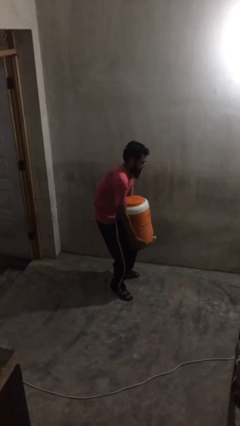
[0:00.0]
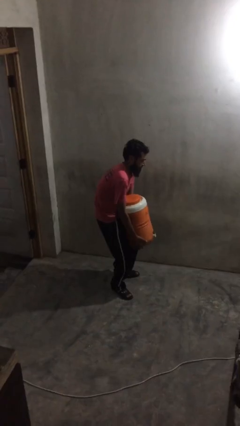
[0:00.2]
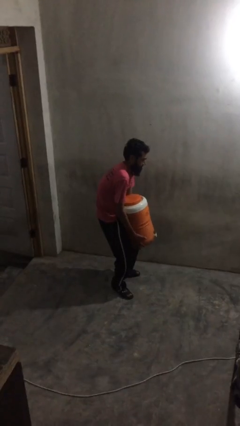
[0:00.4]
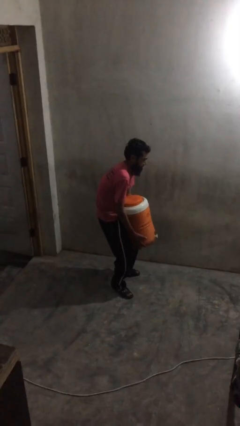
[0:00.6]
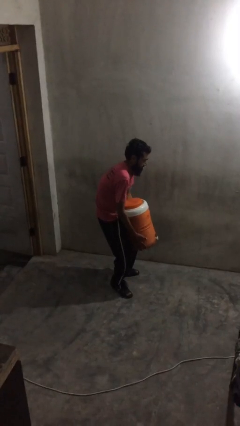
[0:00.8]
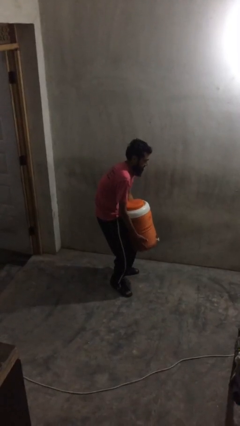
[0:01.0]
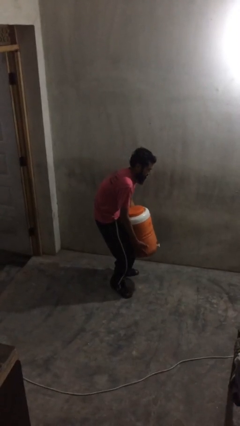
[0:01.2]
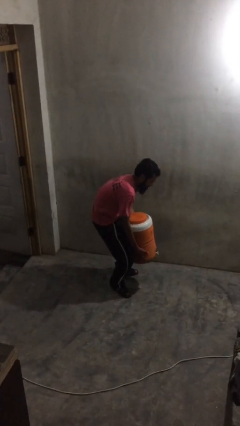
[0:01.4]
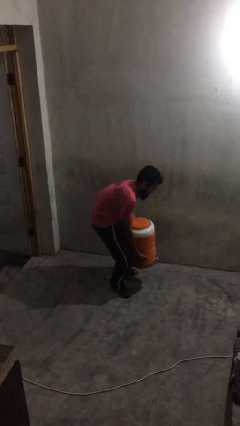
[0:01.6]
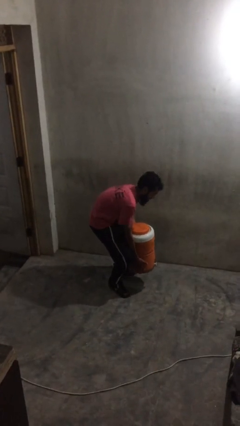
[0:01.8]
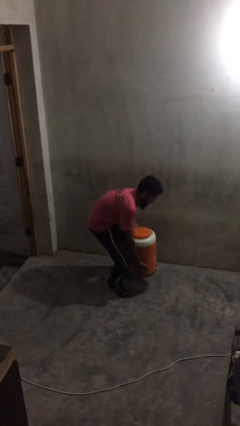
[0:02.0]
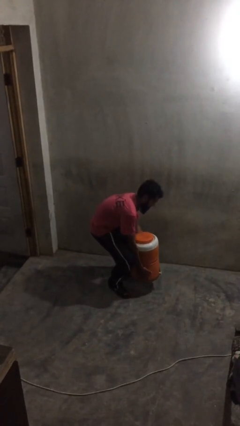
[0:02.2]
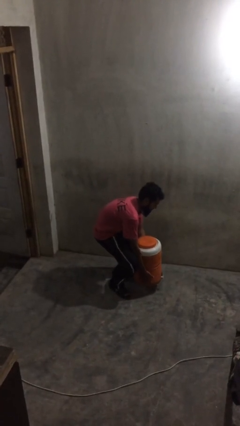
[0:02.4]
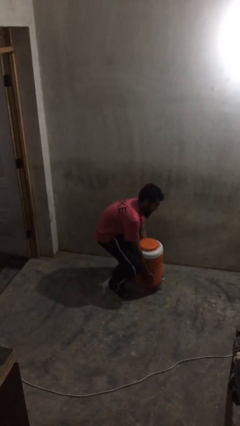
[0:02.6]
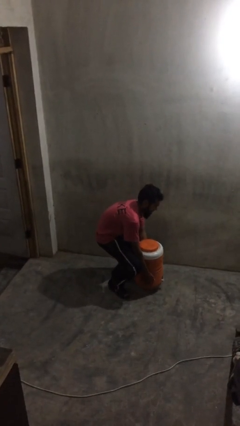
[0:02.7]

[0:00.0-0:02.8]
person puts down object on floor

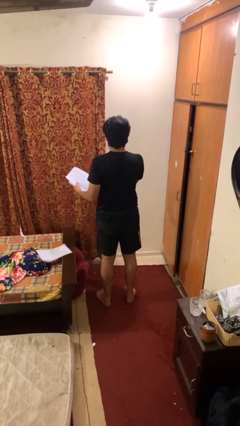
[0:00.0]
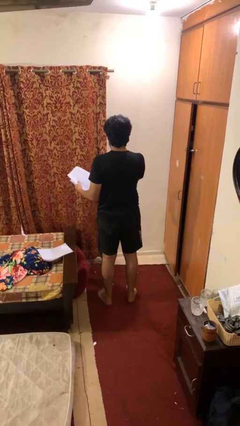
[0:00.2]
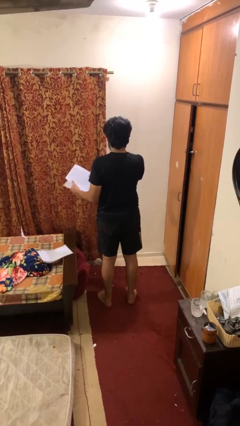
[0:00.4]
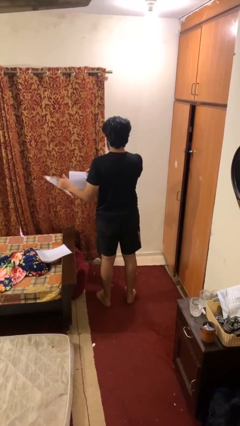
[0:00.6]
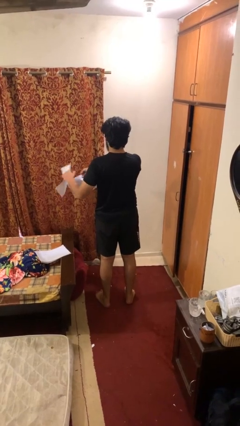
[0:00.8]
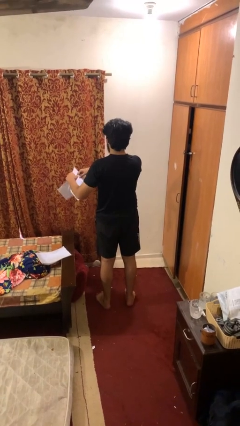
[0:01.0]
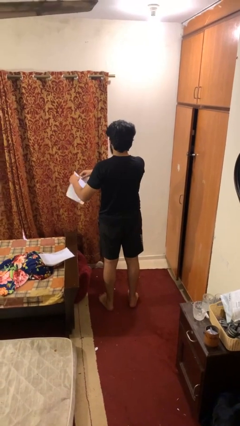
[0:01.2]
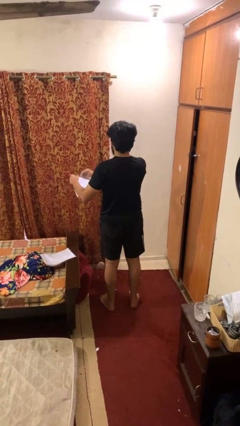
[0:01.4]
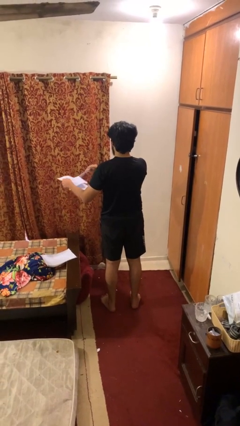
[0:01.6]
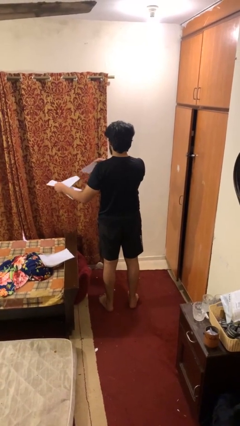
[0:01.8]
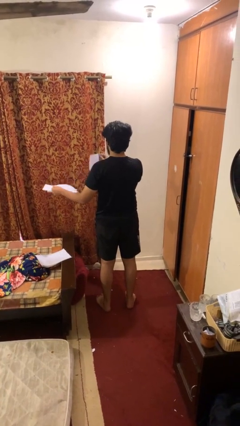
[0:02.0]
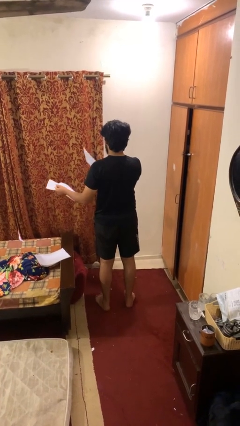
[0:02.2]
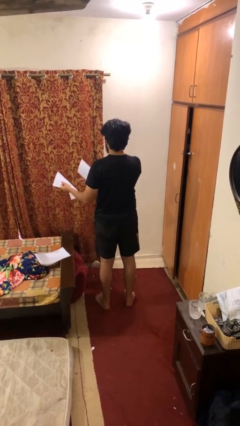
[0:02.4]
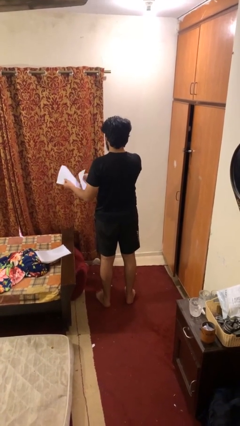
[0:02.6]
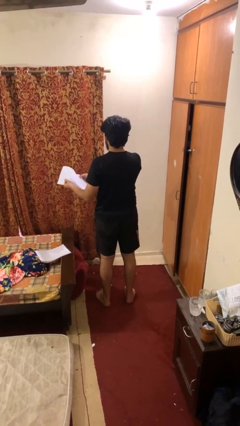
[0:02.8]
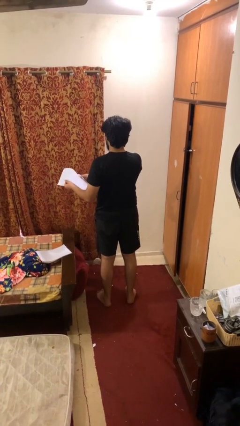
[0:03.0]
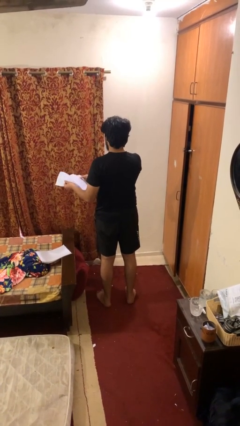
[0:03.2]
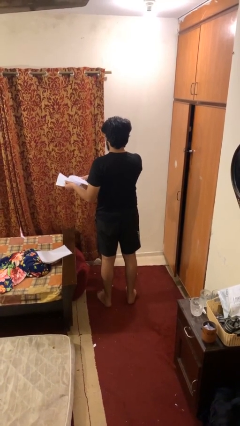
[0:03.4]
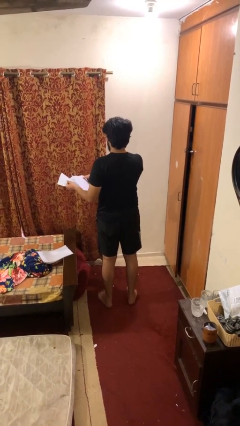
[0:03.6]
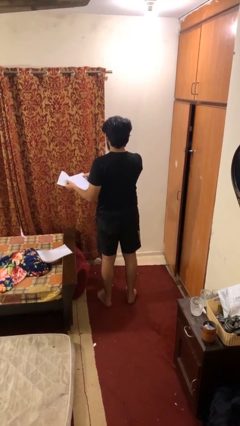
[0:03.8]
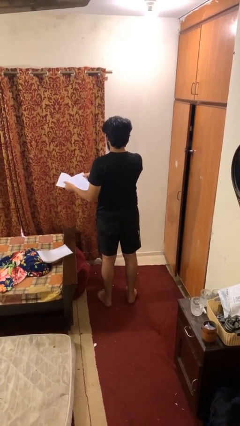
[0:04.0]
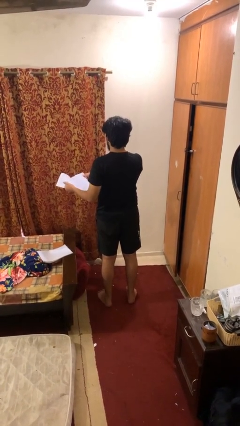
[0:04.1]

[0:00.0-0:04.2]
person tears paper

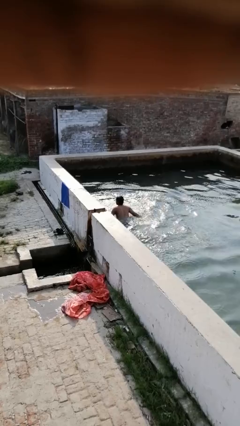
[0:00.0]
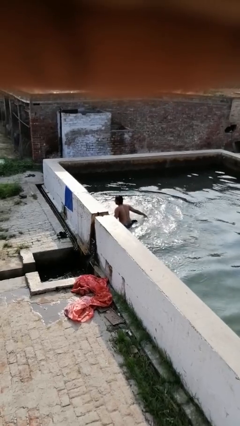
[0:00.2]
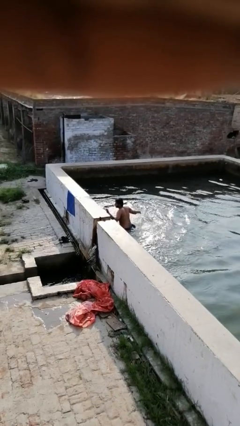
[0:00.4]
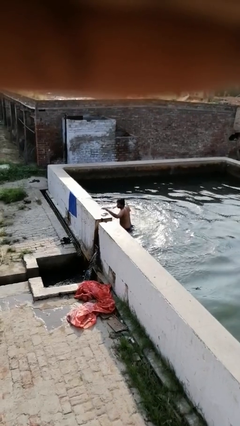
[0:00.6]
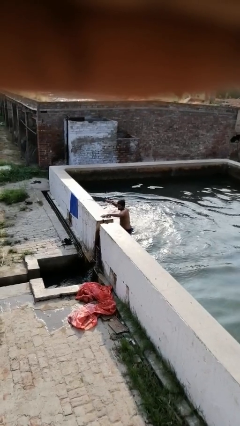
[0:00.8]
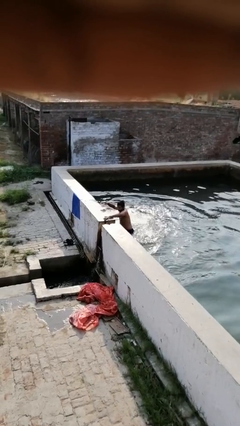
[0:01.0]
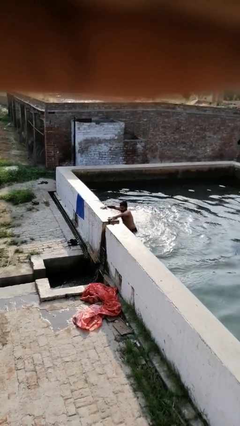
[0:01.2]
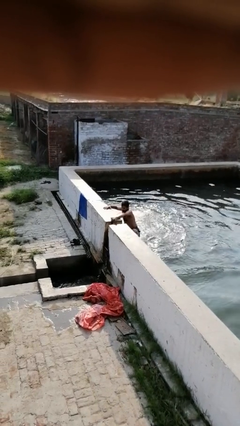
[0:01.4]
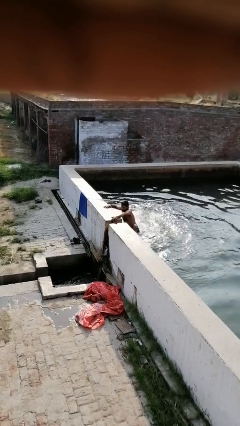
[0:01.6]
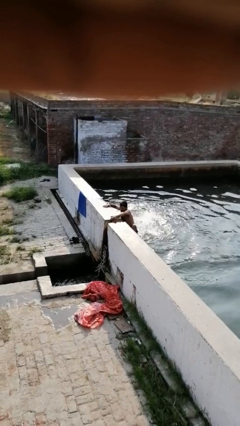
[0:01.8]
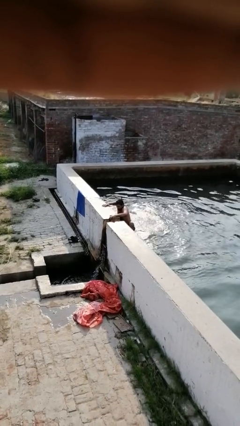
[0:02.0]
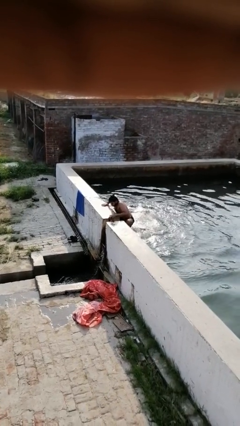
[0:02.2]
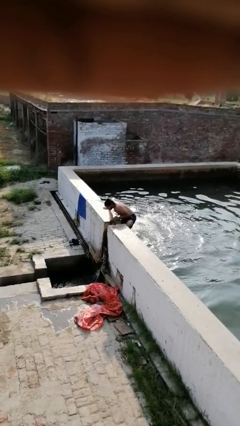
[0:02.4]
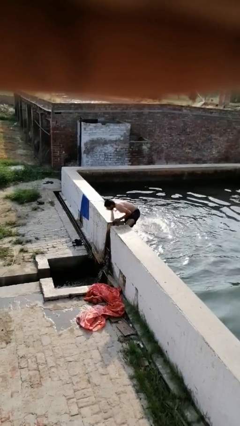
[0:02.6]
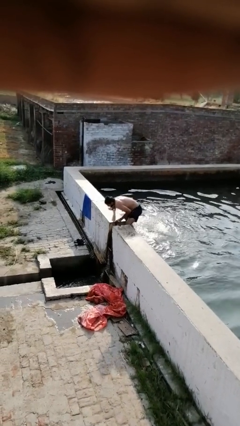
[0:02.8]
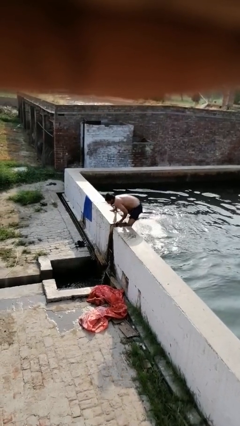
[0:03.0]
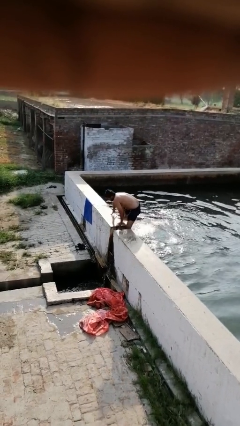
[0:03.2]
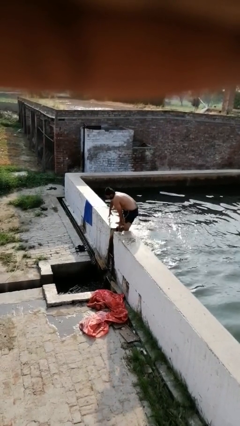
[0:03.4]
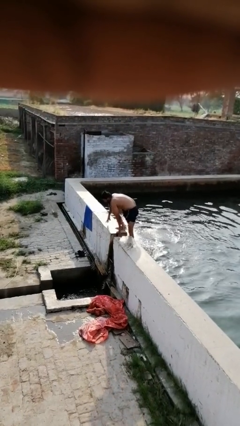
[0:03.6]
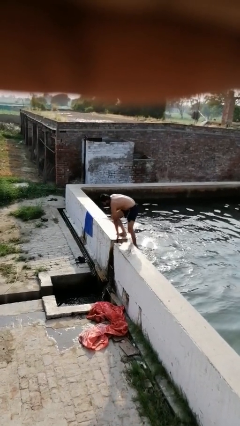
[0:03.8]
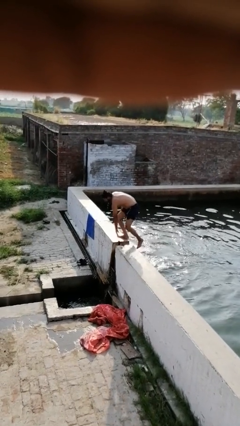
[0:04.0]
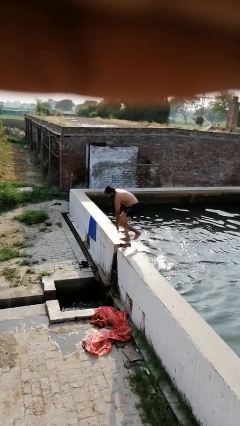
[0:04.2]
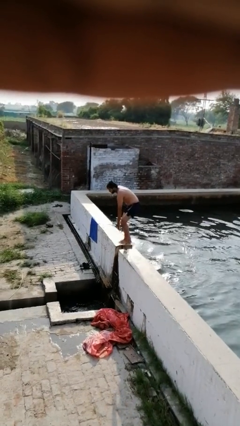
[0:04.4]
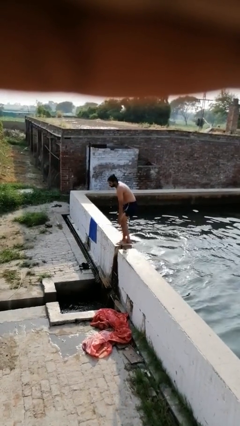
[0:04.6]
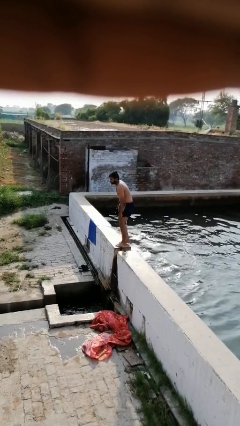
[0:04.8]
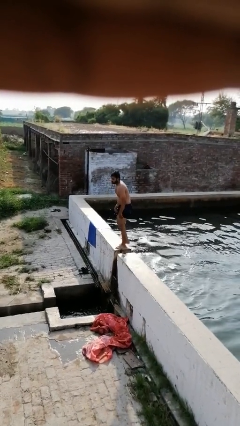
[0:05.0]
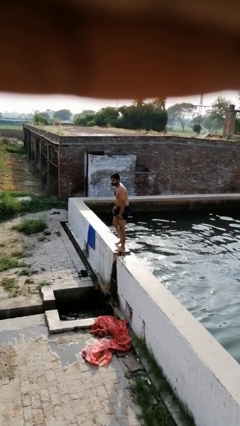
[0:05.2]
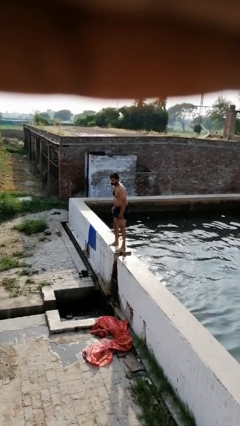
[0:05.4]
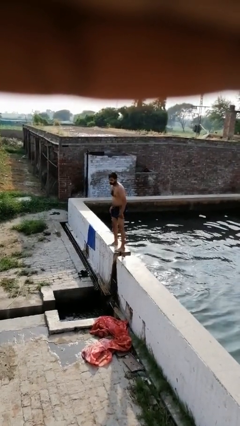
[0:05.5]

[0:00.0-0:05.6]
person exits pool

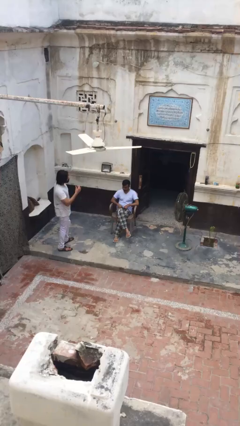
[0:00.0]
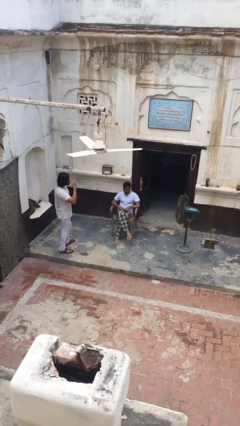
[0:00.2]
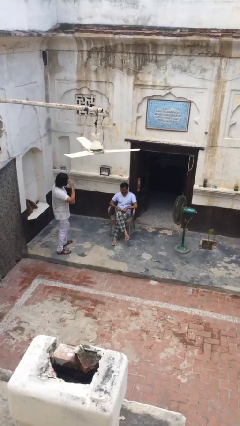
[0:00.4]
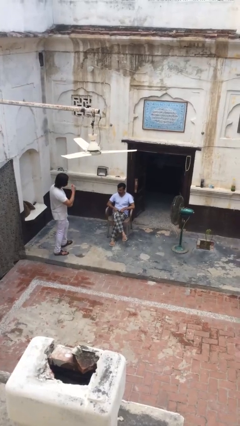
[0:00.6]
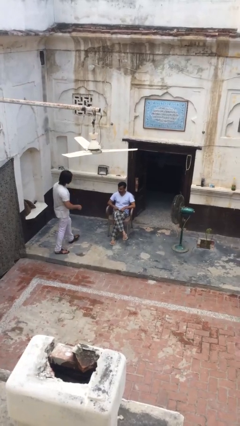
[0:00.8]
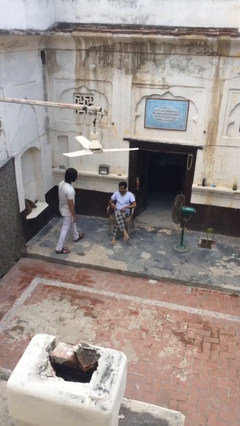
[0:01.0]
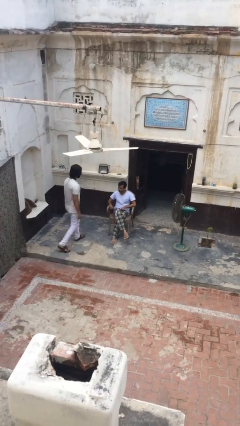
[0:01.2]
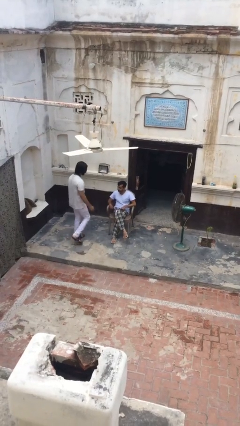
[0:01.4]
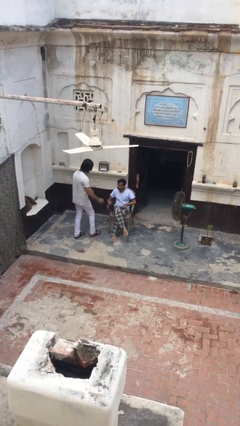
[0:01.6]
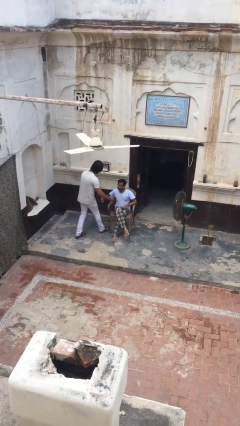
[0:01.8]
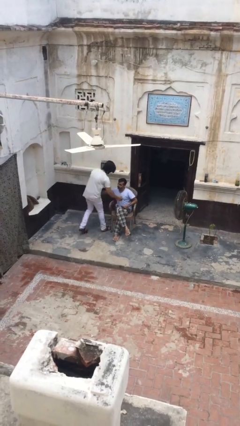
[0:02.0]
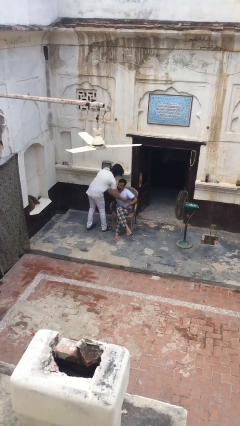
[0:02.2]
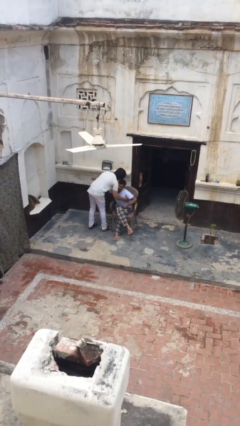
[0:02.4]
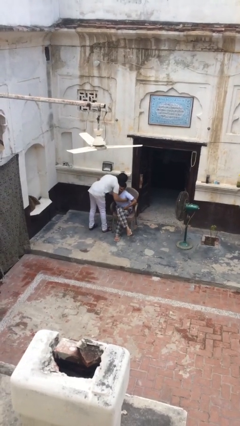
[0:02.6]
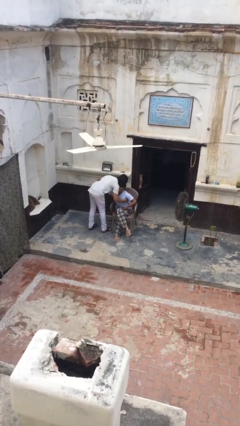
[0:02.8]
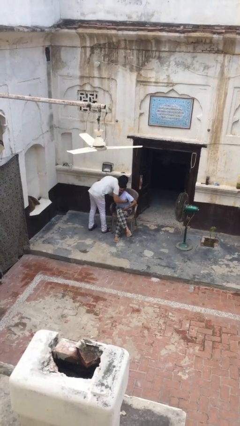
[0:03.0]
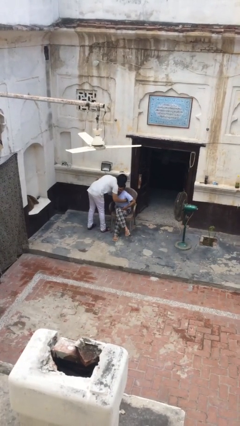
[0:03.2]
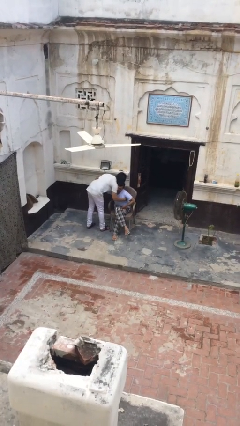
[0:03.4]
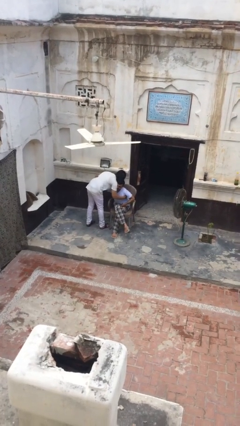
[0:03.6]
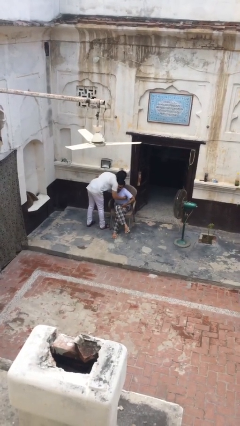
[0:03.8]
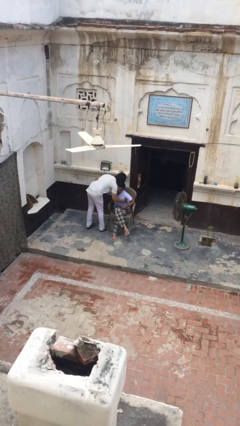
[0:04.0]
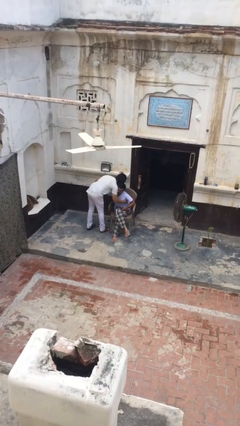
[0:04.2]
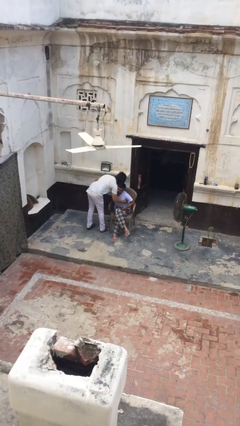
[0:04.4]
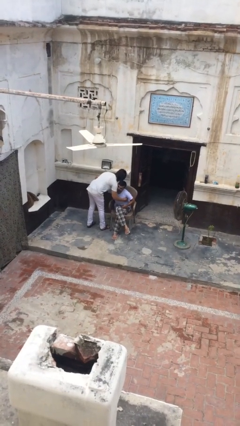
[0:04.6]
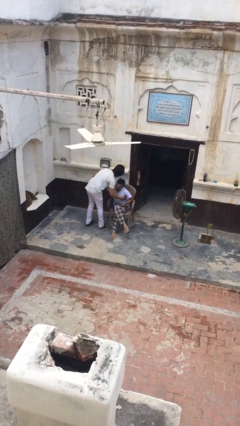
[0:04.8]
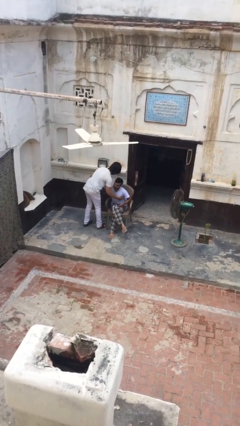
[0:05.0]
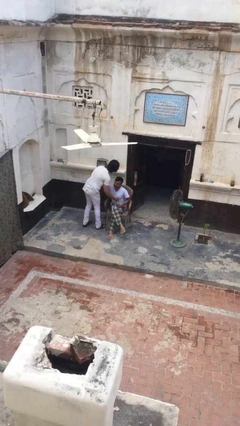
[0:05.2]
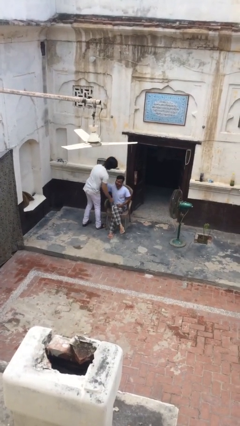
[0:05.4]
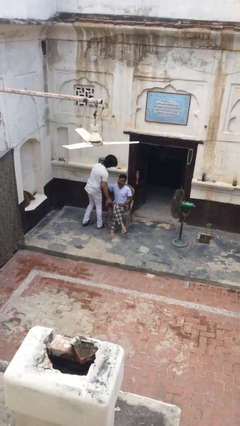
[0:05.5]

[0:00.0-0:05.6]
person embraces person
